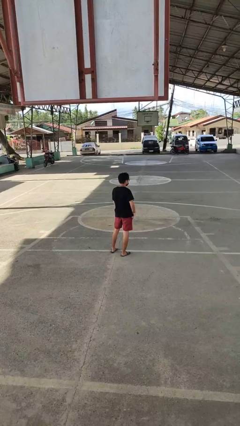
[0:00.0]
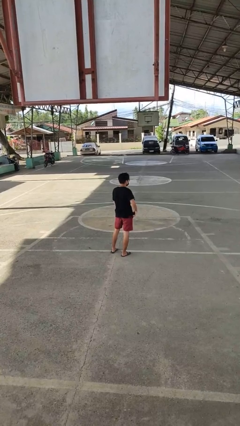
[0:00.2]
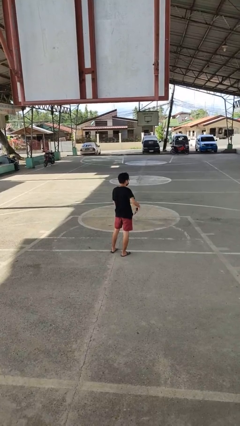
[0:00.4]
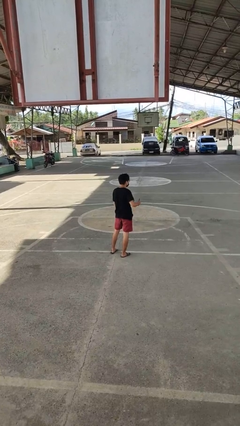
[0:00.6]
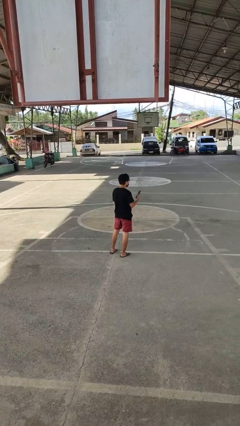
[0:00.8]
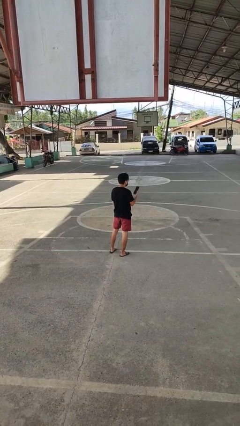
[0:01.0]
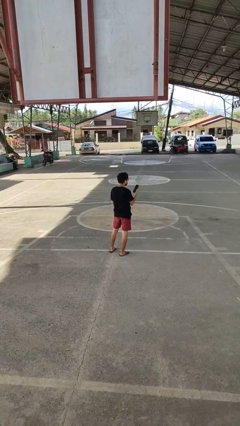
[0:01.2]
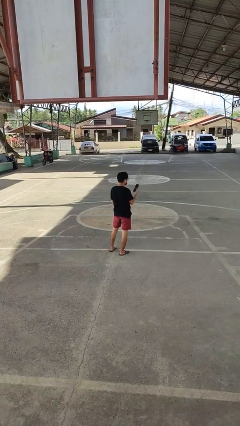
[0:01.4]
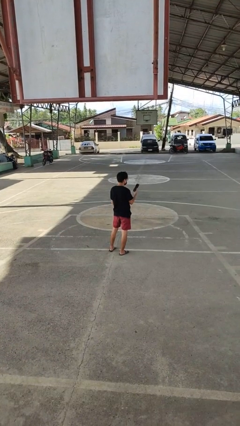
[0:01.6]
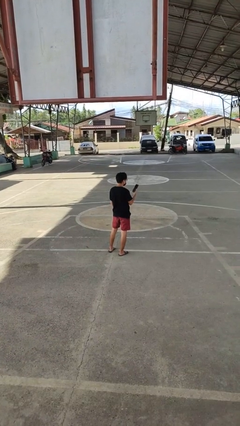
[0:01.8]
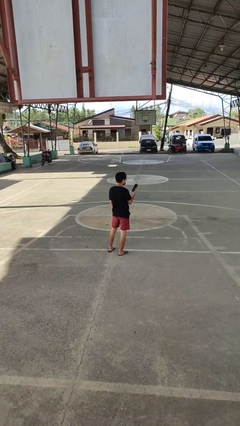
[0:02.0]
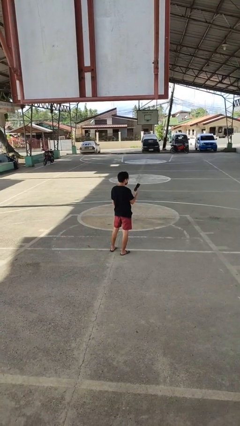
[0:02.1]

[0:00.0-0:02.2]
person takes phone from pocket

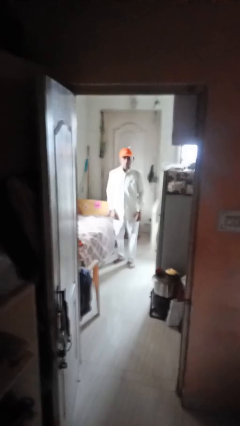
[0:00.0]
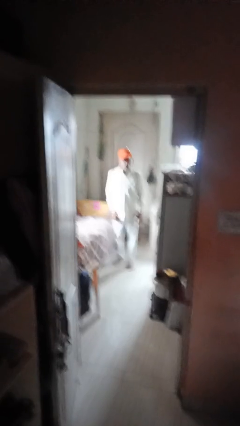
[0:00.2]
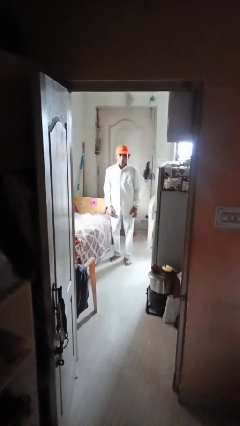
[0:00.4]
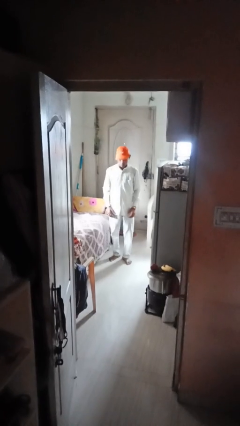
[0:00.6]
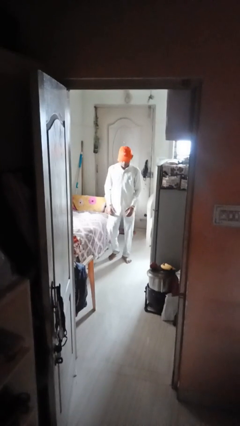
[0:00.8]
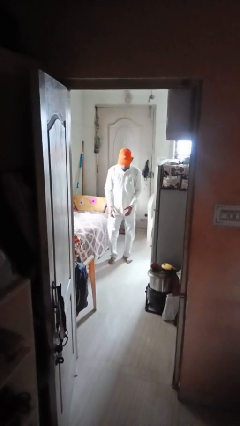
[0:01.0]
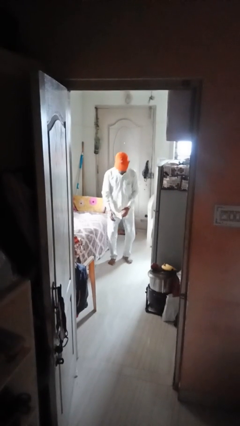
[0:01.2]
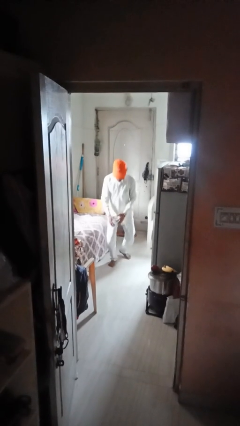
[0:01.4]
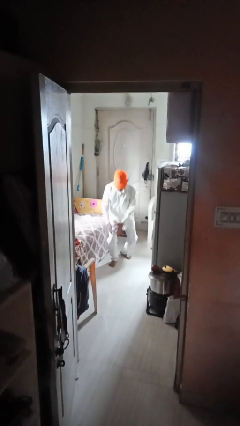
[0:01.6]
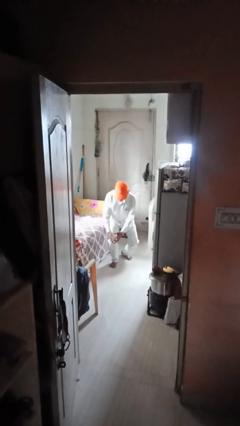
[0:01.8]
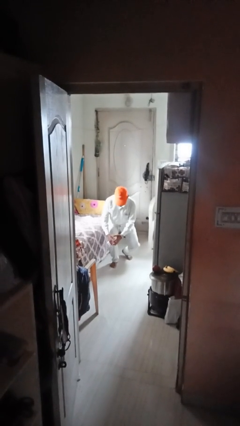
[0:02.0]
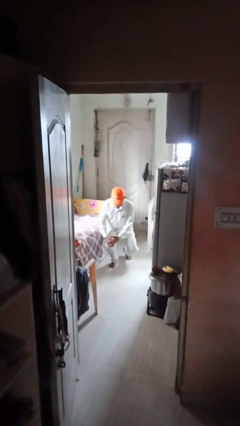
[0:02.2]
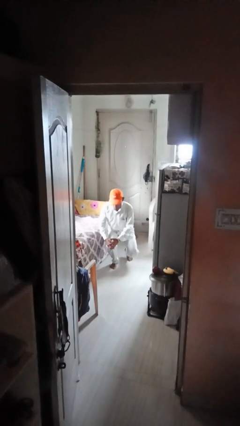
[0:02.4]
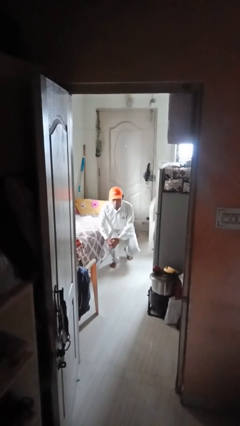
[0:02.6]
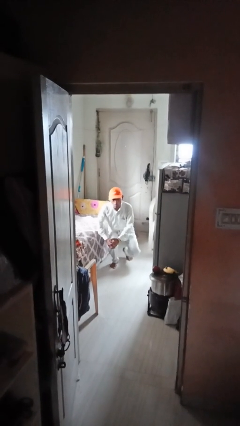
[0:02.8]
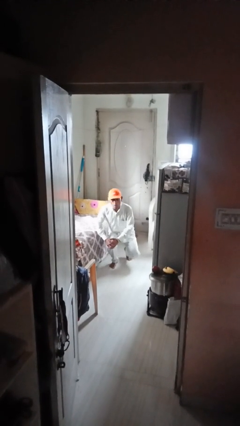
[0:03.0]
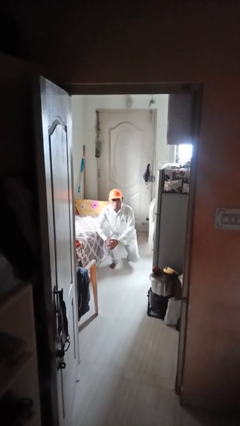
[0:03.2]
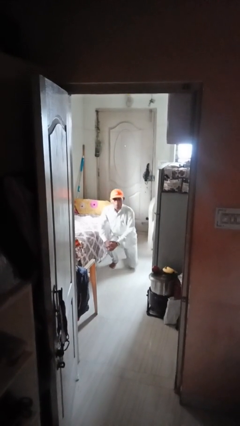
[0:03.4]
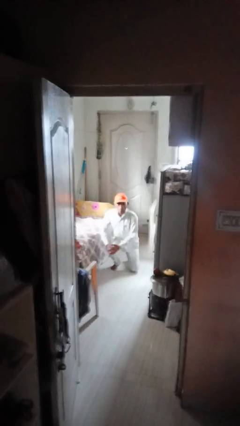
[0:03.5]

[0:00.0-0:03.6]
person exercises with lunges

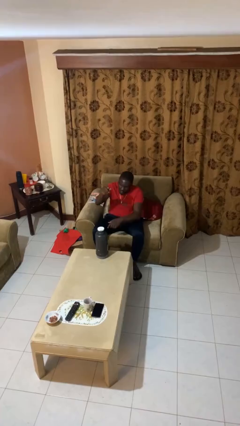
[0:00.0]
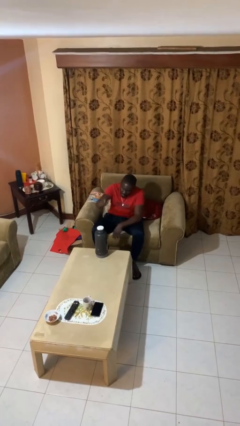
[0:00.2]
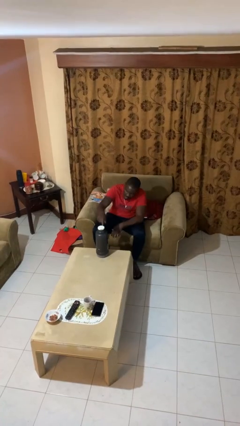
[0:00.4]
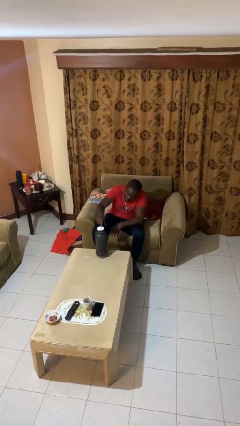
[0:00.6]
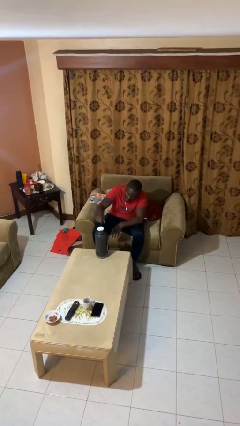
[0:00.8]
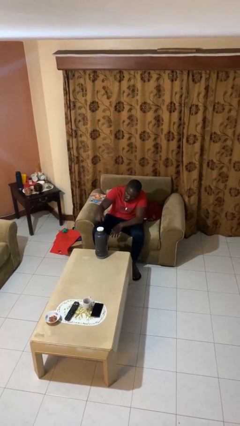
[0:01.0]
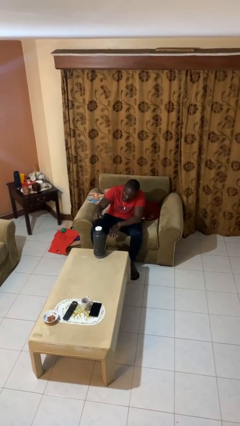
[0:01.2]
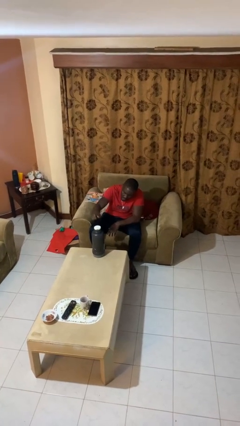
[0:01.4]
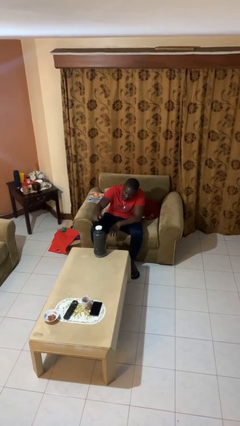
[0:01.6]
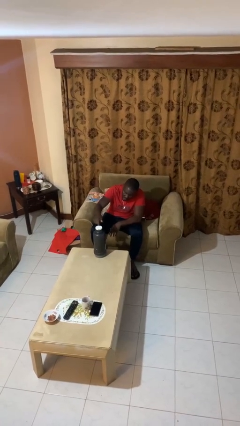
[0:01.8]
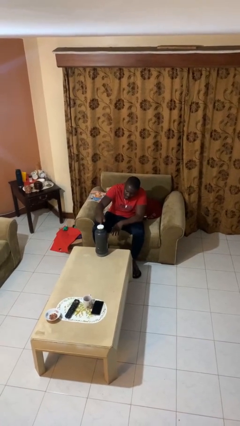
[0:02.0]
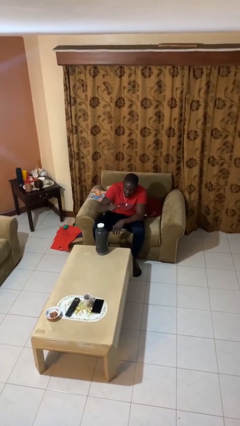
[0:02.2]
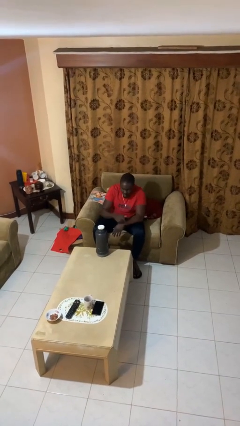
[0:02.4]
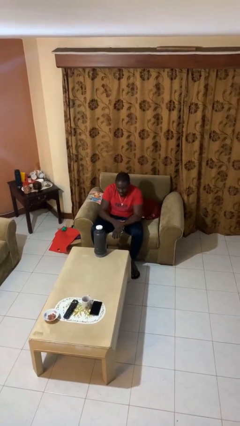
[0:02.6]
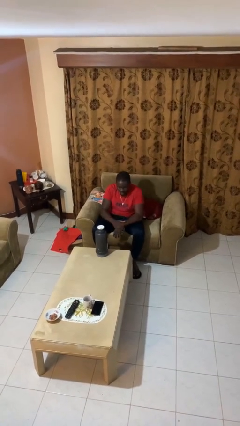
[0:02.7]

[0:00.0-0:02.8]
person taps object with finger

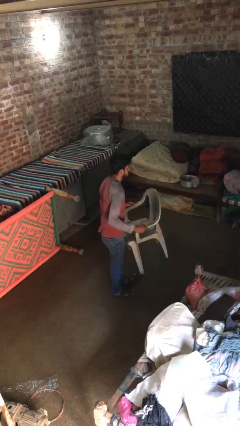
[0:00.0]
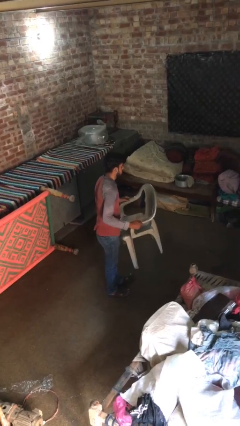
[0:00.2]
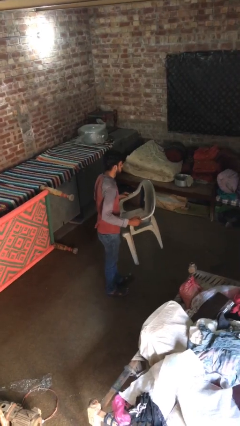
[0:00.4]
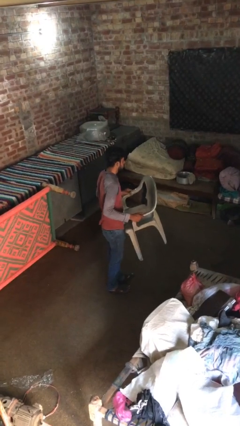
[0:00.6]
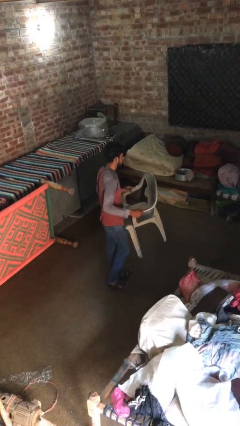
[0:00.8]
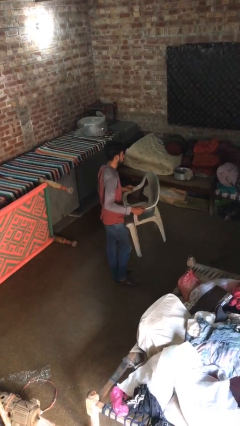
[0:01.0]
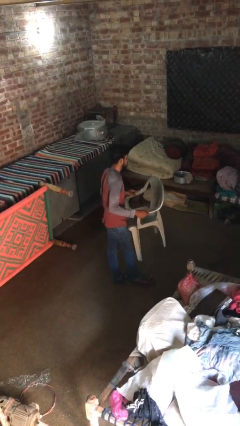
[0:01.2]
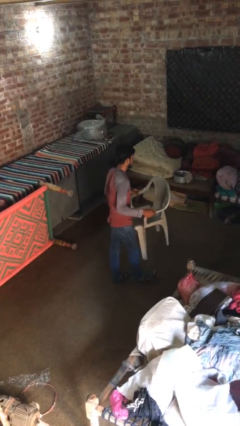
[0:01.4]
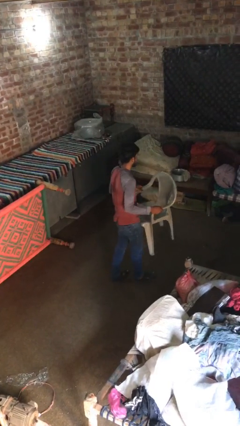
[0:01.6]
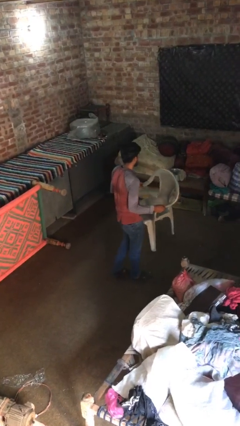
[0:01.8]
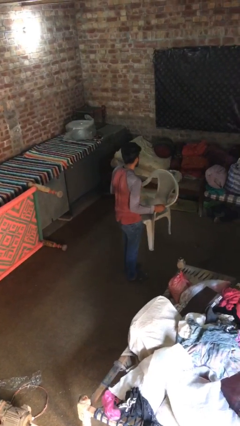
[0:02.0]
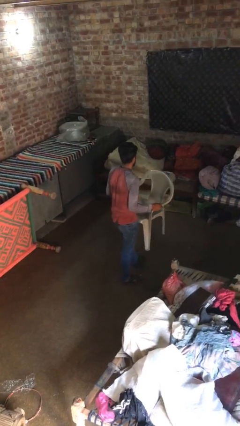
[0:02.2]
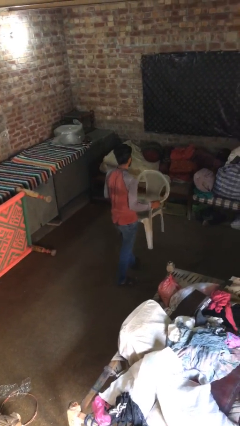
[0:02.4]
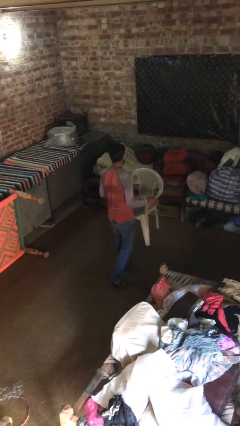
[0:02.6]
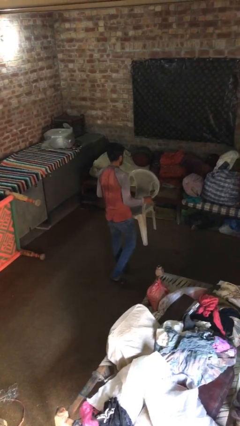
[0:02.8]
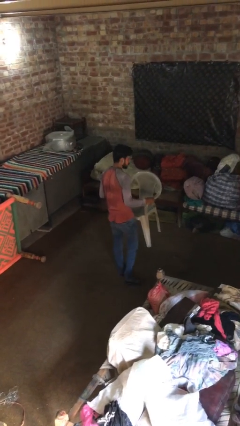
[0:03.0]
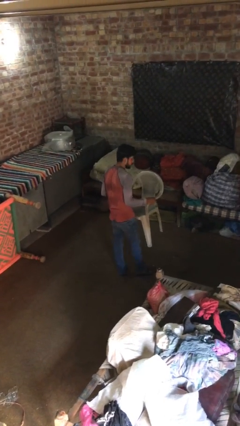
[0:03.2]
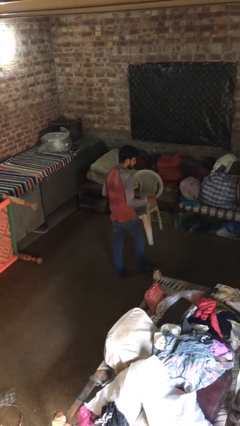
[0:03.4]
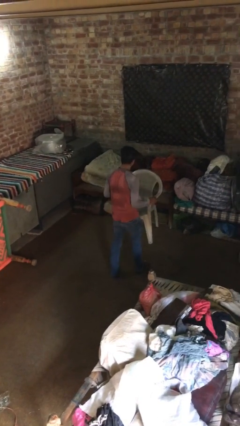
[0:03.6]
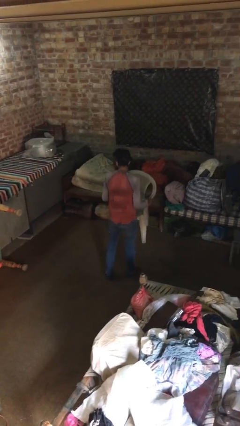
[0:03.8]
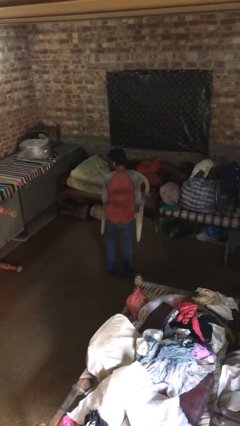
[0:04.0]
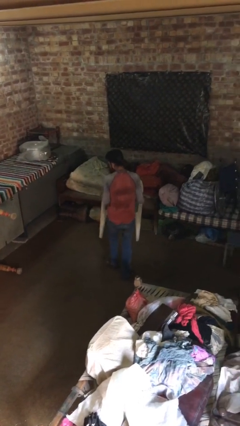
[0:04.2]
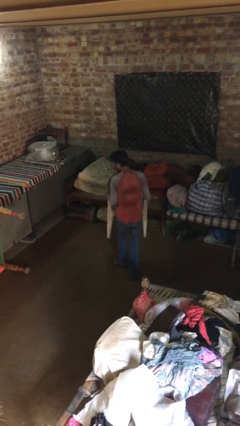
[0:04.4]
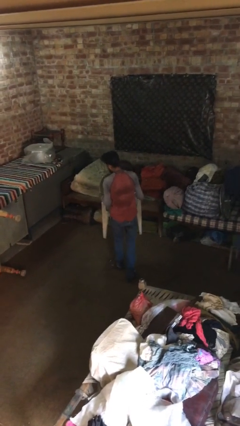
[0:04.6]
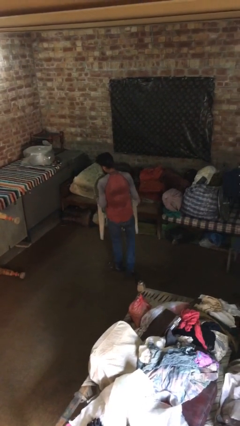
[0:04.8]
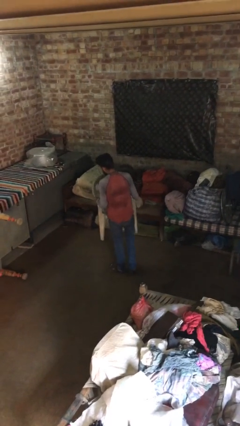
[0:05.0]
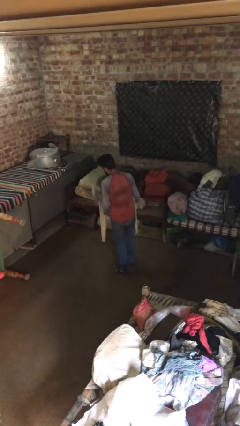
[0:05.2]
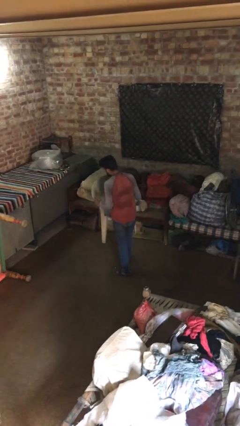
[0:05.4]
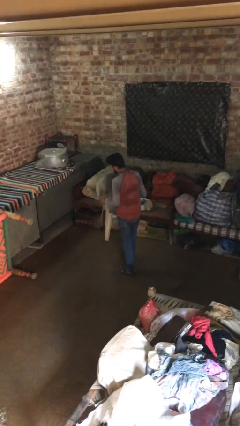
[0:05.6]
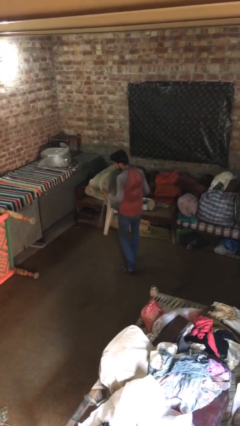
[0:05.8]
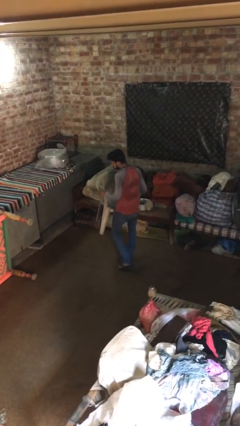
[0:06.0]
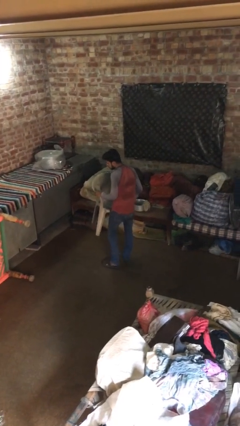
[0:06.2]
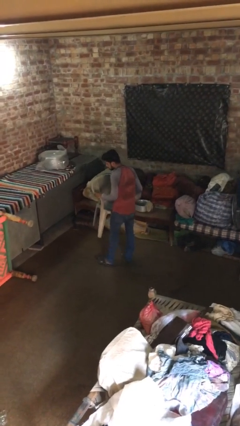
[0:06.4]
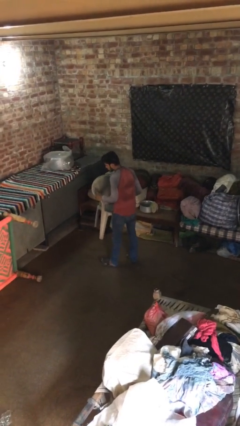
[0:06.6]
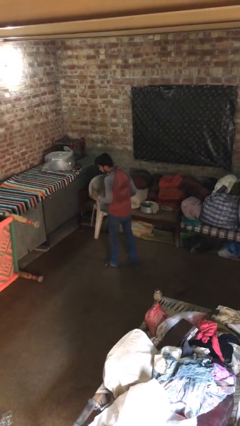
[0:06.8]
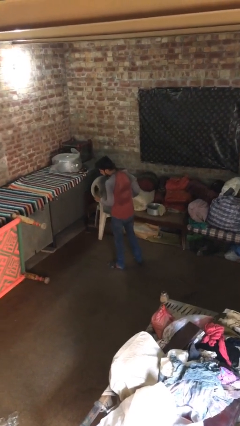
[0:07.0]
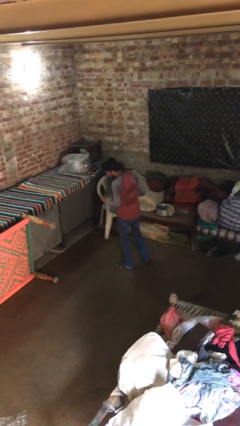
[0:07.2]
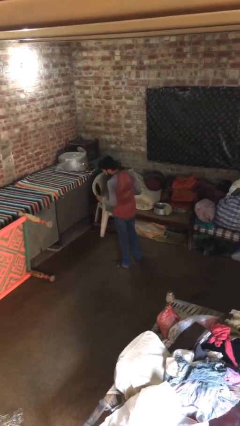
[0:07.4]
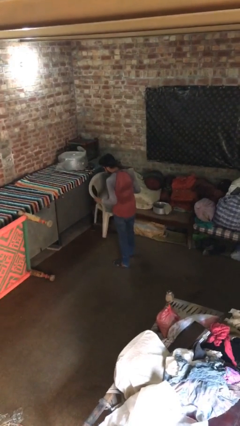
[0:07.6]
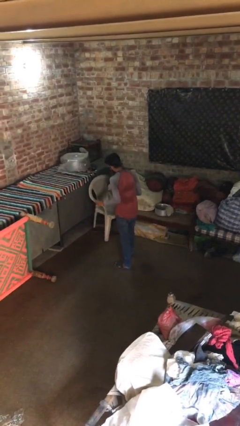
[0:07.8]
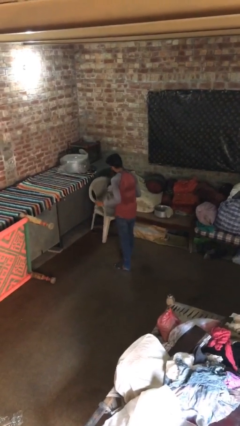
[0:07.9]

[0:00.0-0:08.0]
person carries heavy object

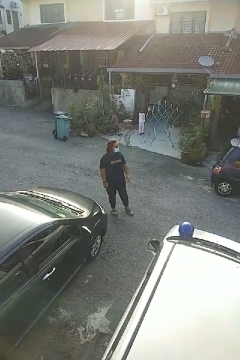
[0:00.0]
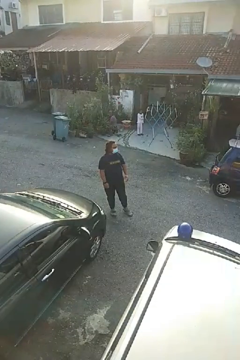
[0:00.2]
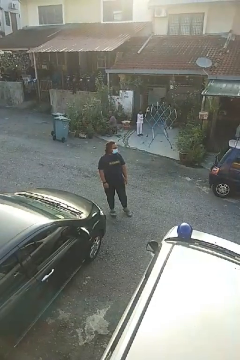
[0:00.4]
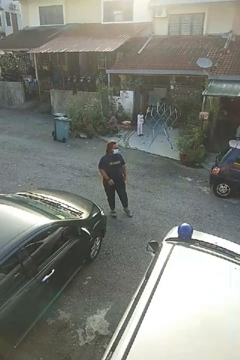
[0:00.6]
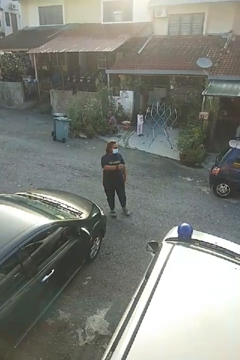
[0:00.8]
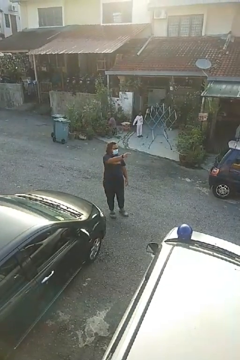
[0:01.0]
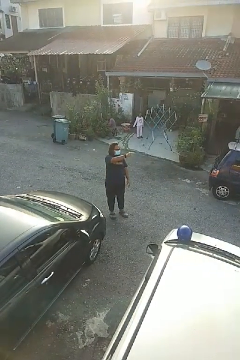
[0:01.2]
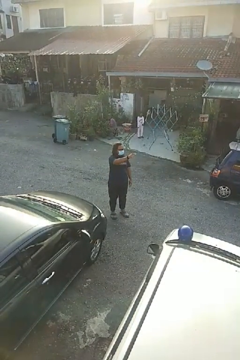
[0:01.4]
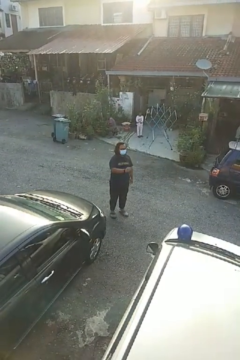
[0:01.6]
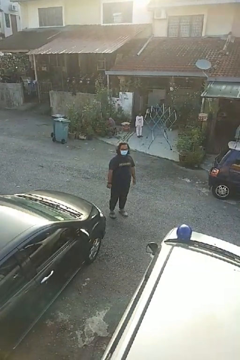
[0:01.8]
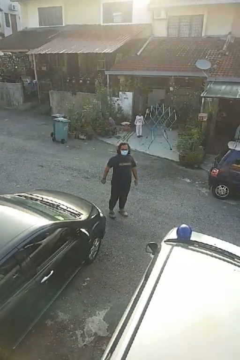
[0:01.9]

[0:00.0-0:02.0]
person points at person
